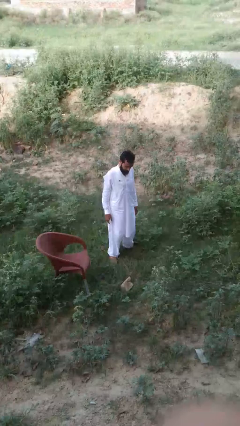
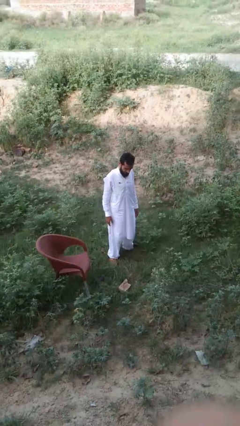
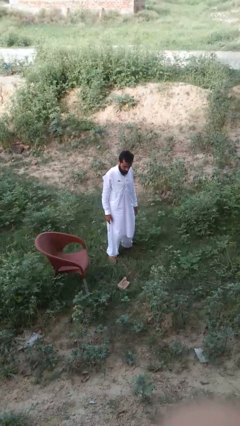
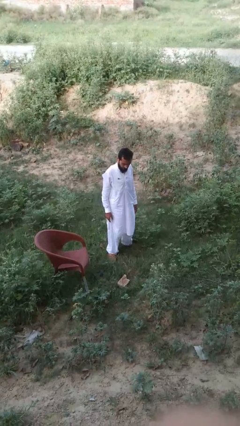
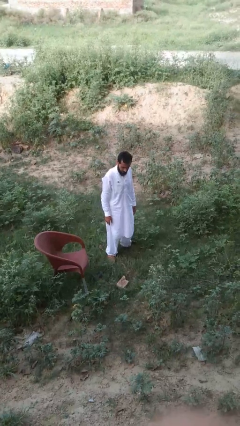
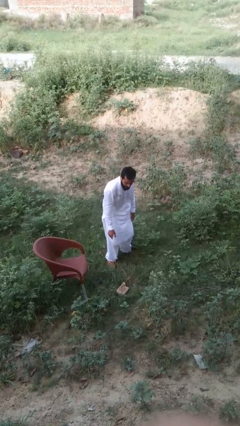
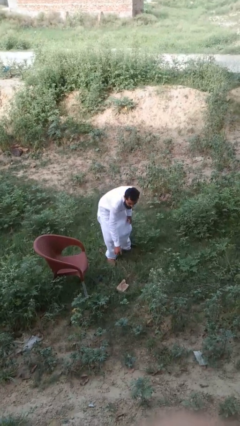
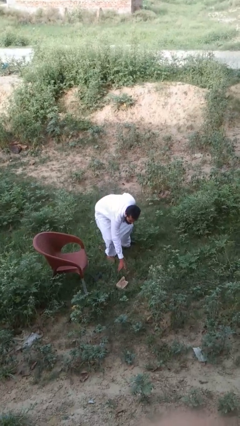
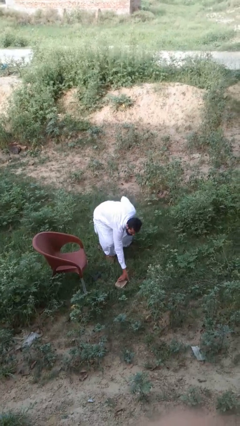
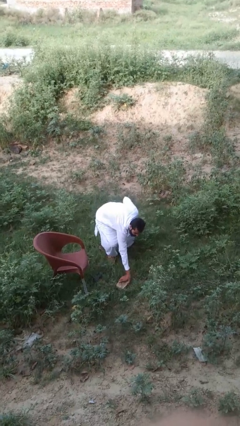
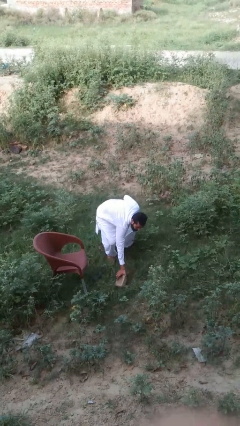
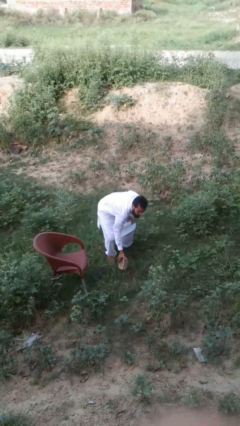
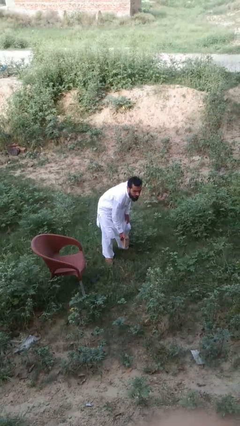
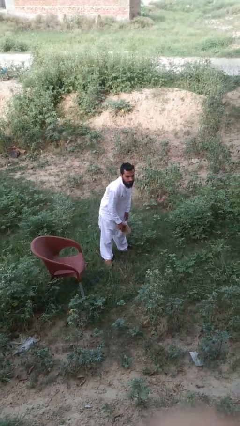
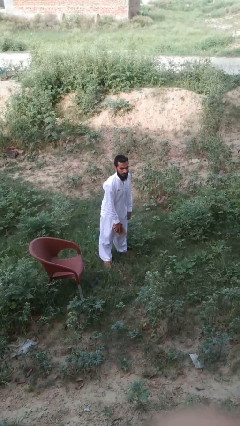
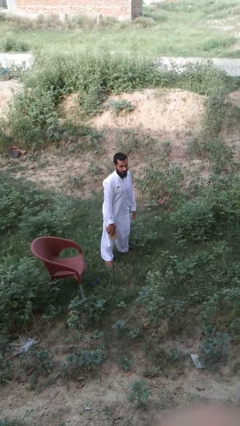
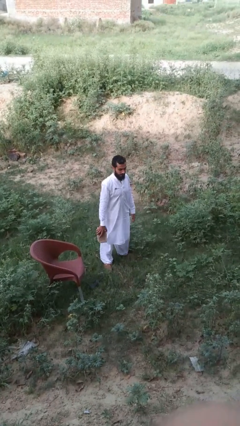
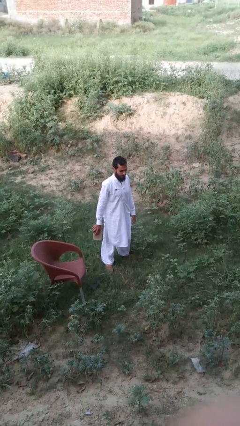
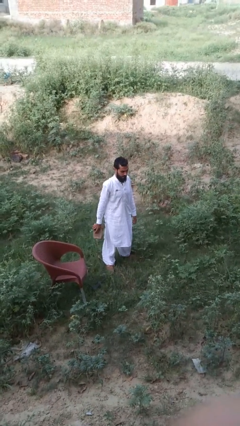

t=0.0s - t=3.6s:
person picks up object from floor

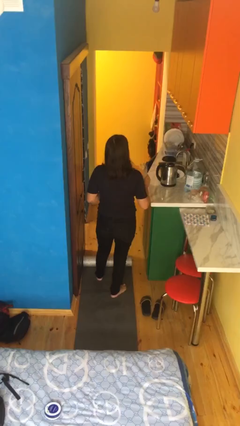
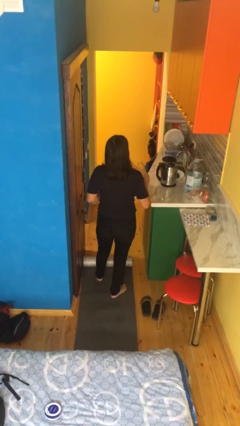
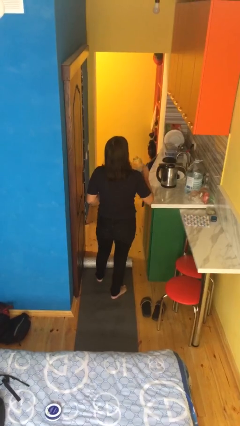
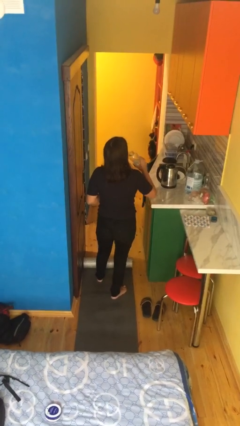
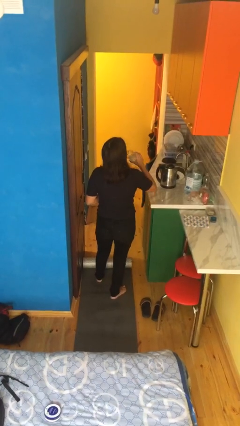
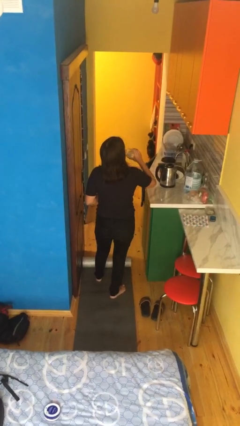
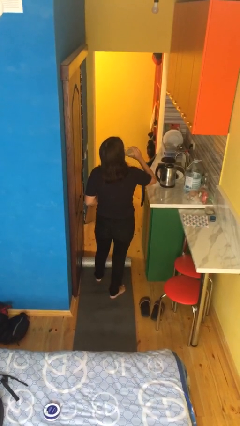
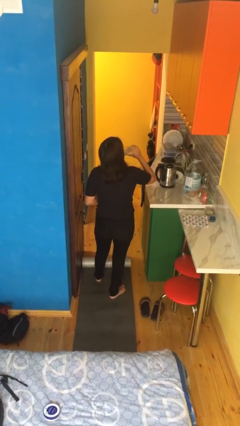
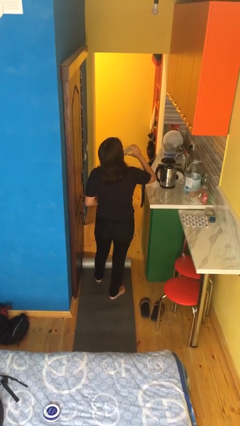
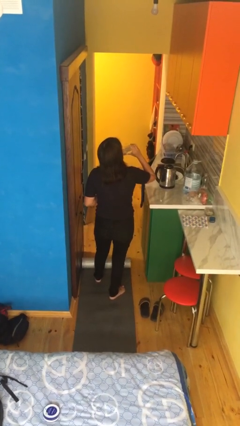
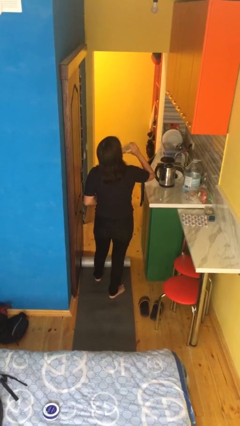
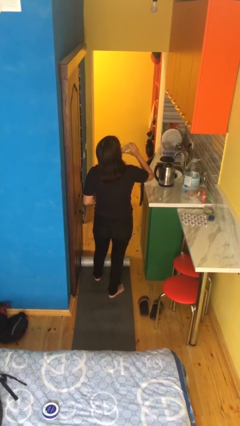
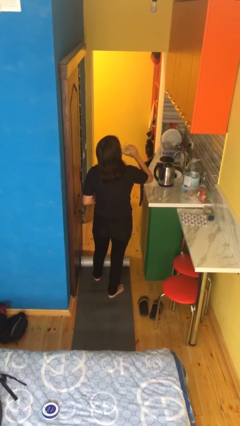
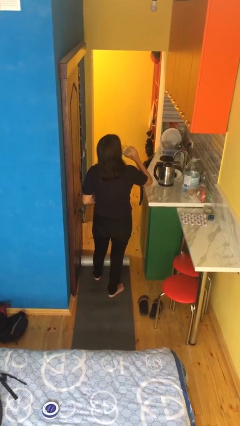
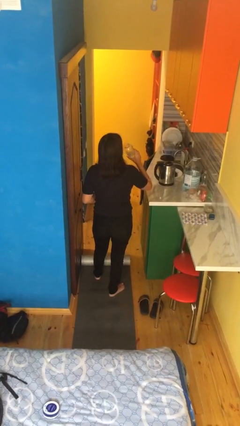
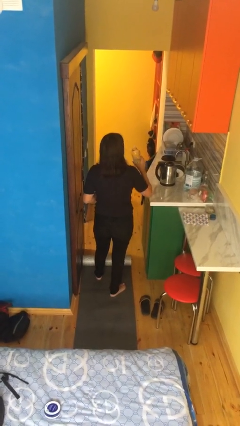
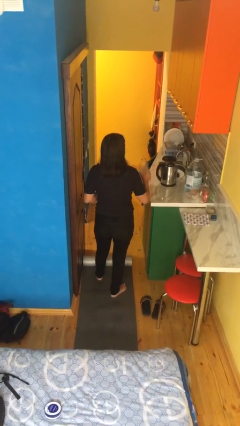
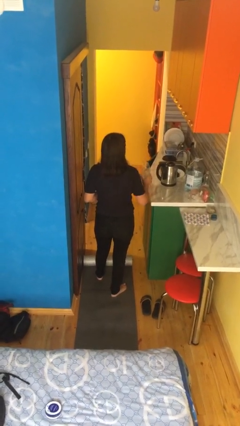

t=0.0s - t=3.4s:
person drinks from bottle

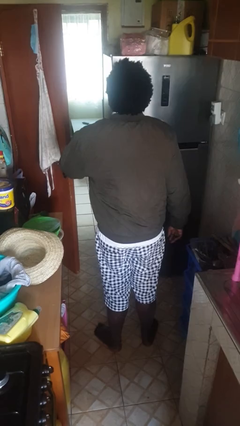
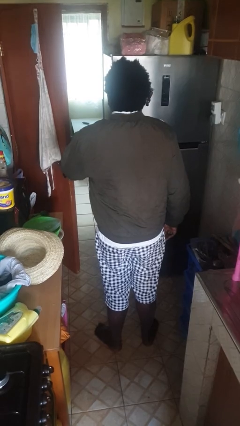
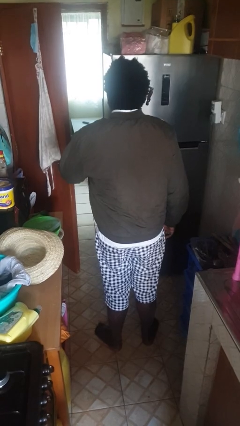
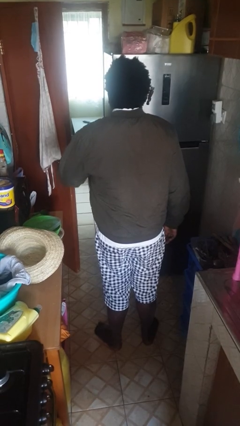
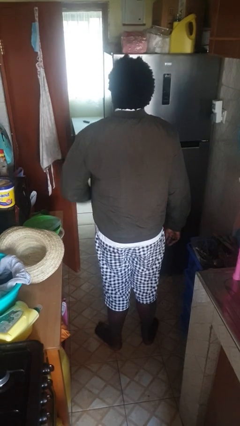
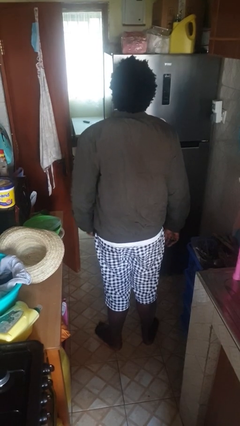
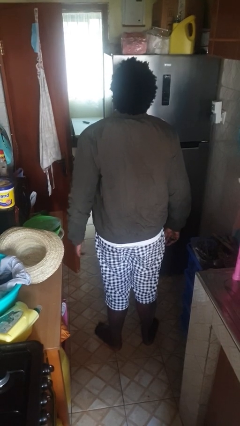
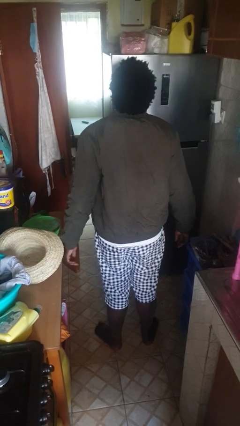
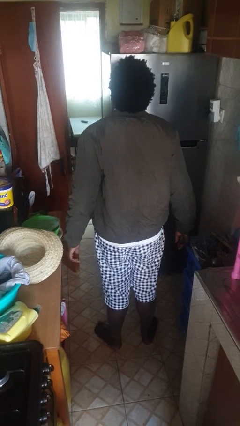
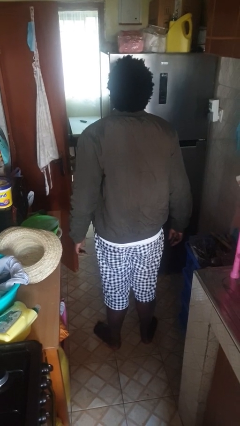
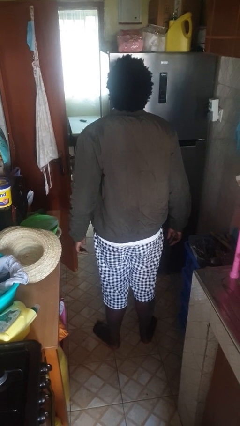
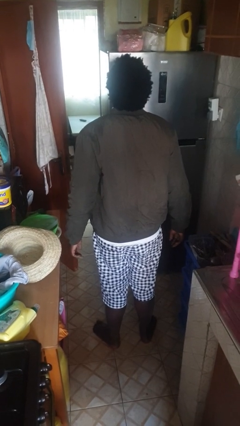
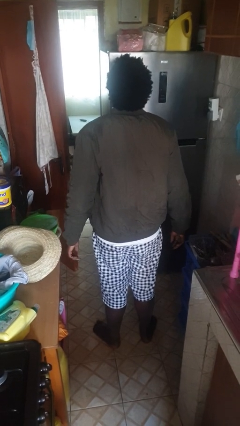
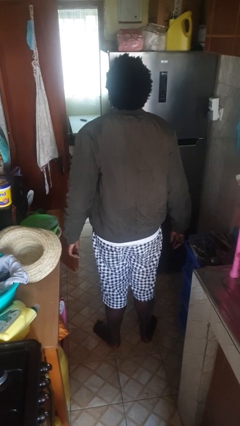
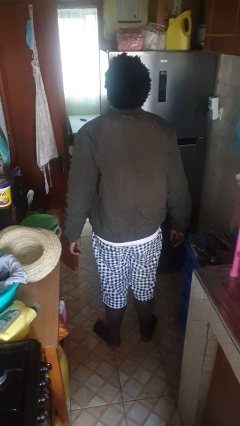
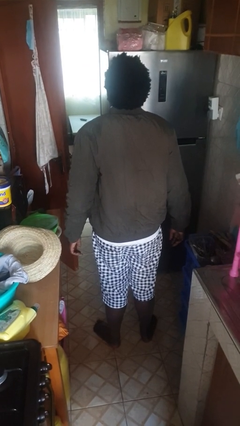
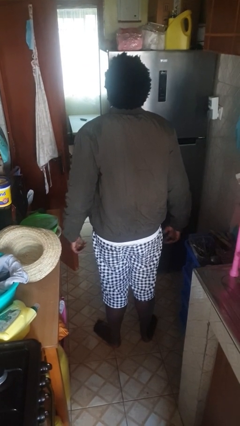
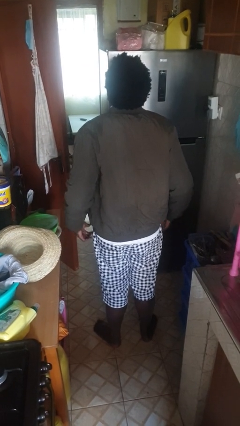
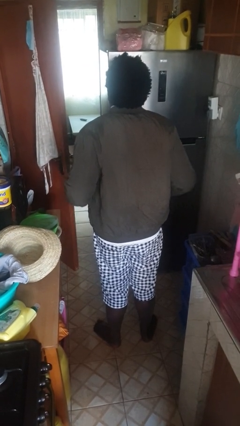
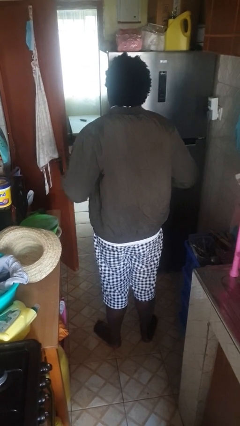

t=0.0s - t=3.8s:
person unzips jacket

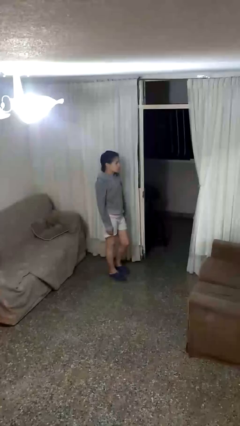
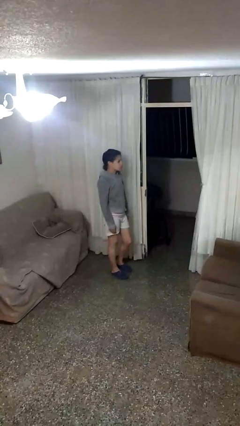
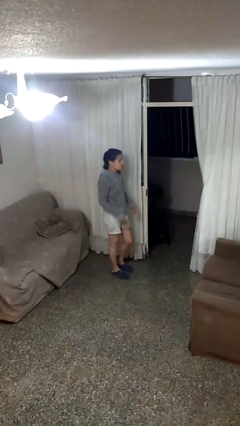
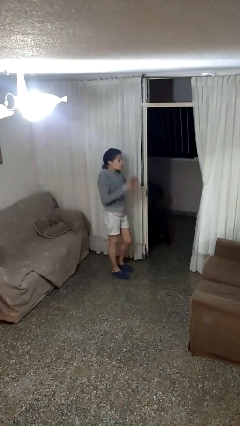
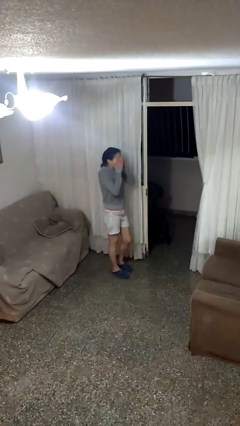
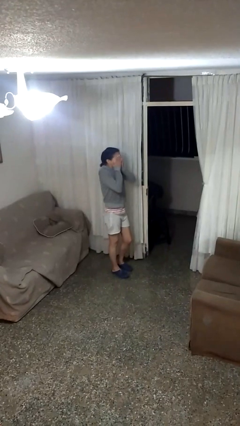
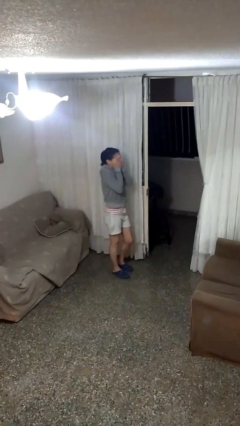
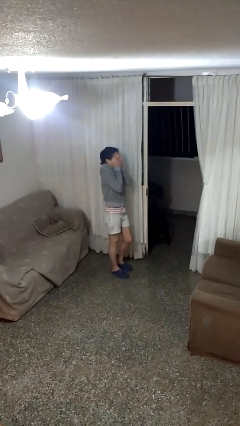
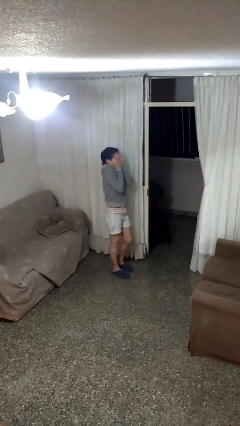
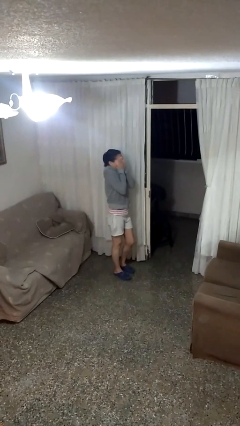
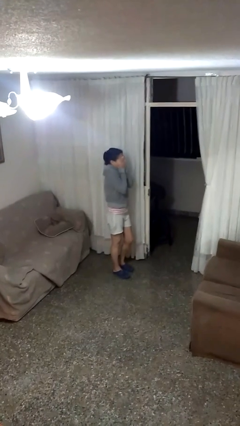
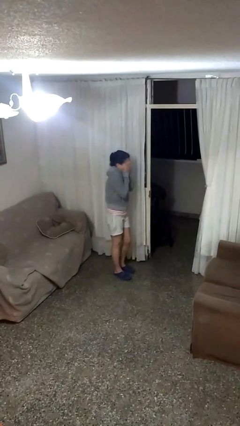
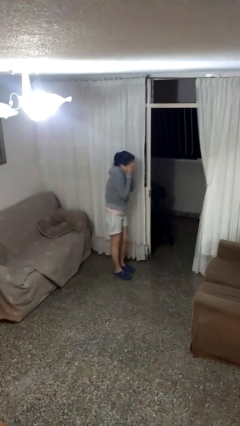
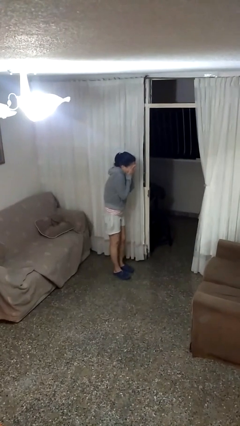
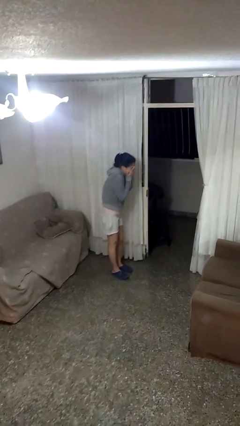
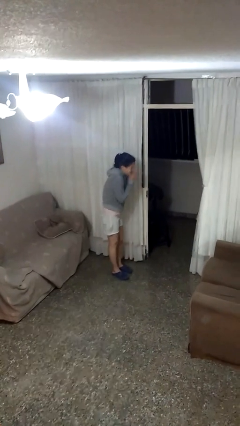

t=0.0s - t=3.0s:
person covers face with hands

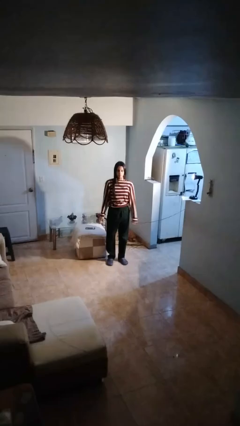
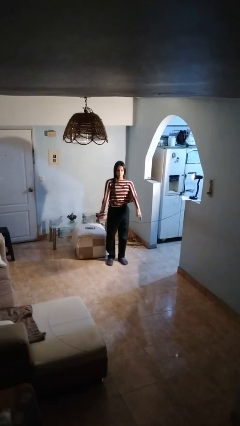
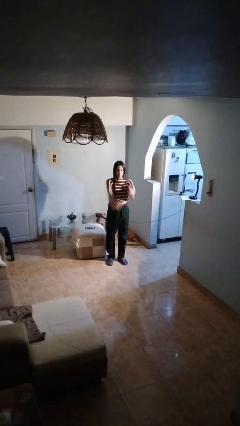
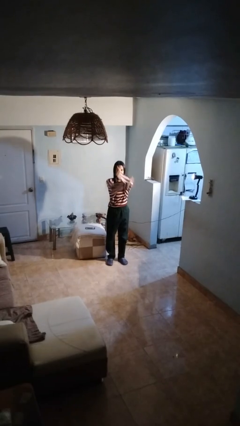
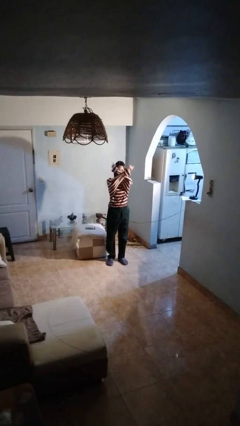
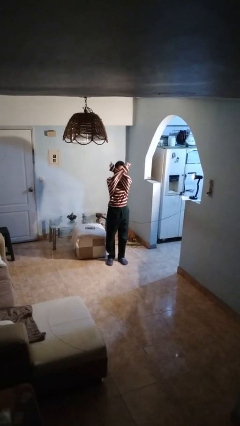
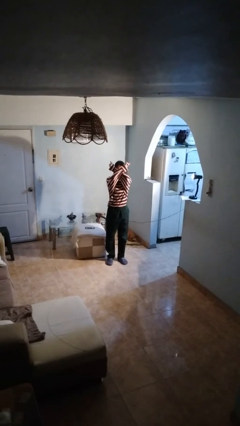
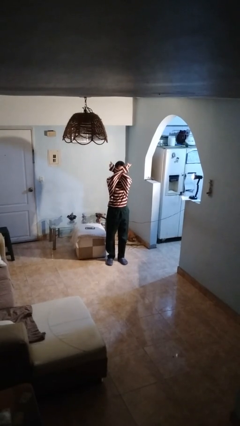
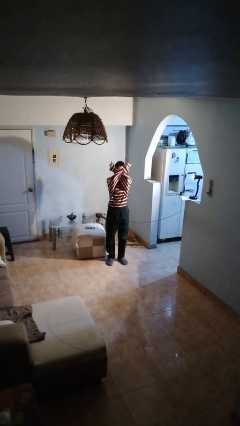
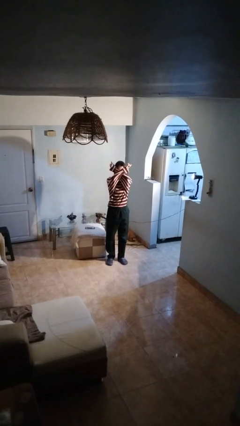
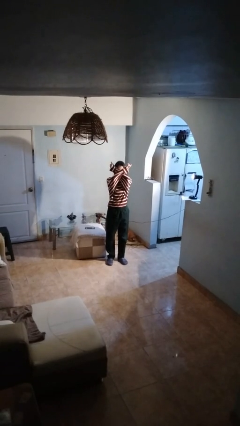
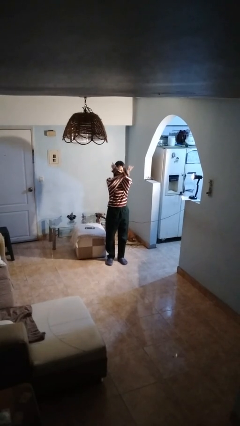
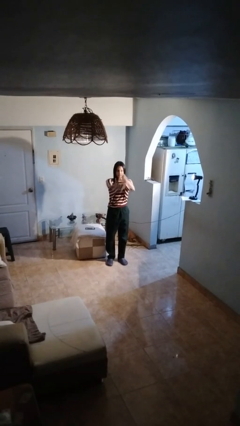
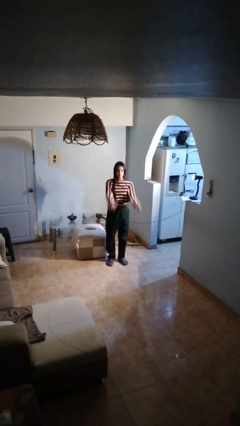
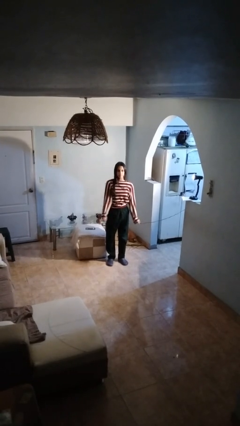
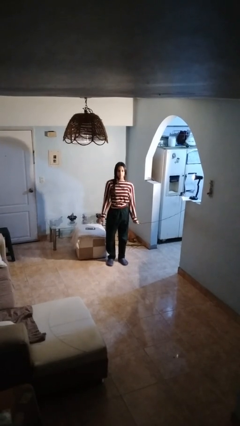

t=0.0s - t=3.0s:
person gestures arms x

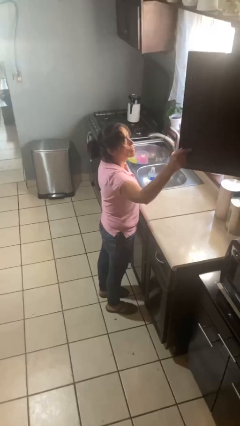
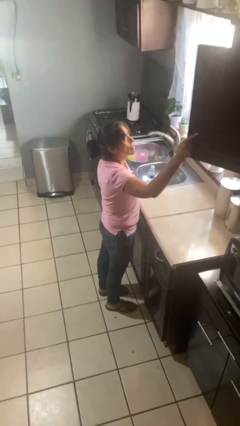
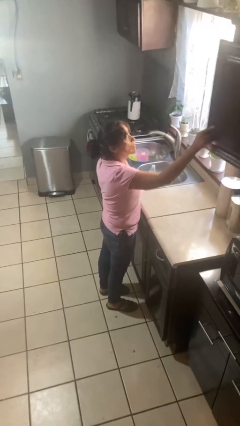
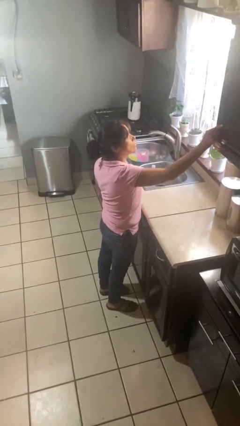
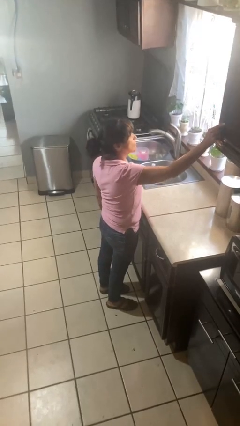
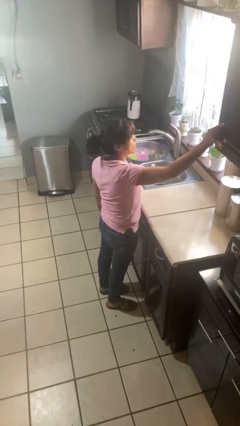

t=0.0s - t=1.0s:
person closes cabinet
